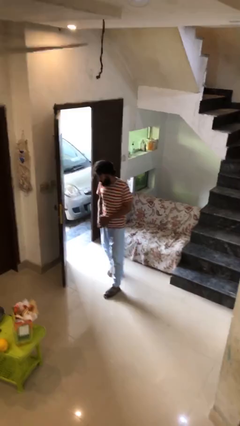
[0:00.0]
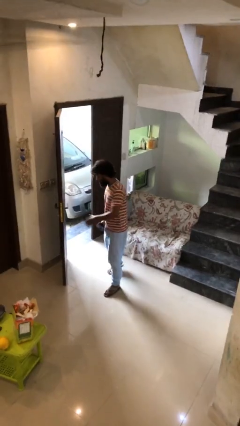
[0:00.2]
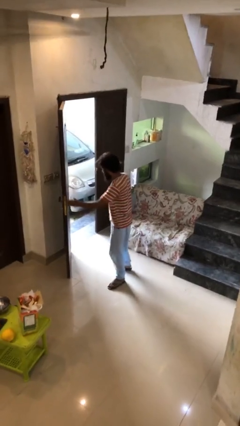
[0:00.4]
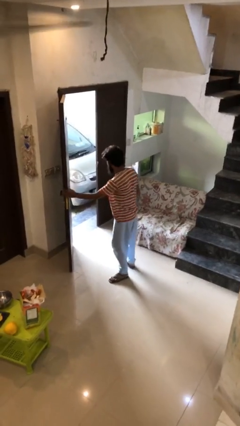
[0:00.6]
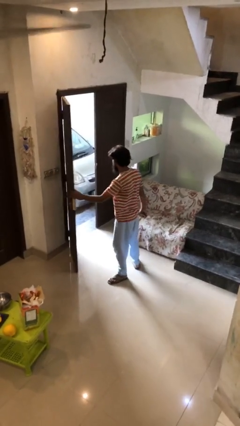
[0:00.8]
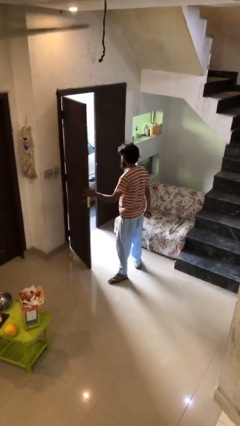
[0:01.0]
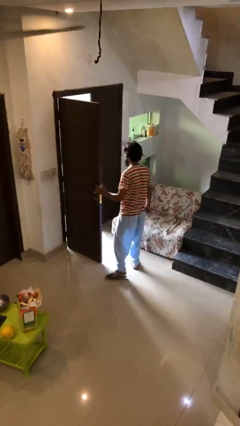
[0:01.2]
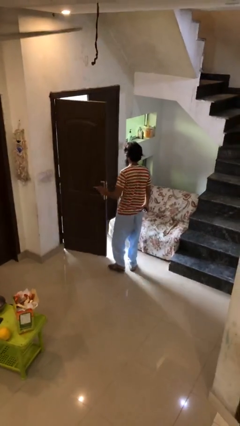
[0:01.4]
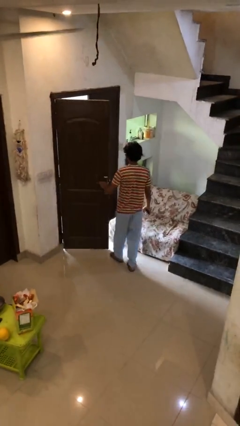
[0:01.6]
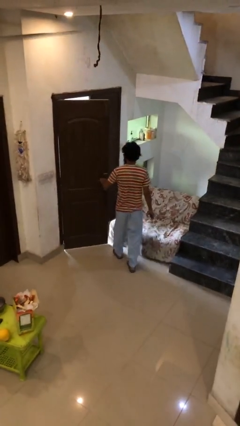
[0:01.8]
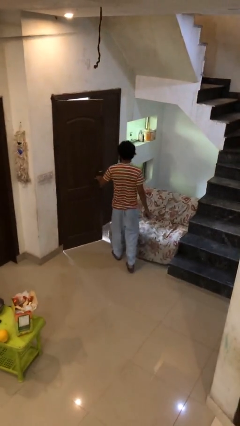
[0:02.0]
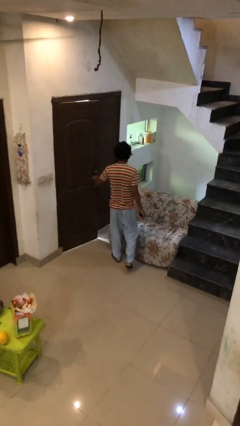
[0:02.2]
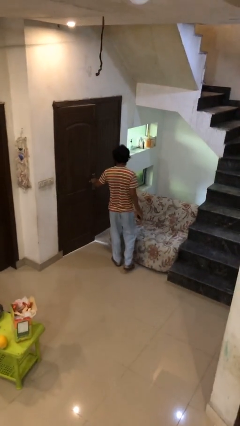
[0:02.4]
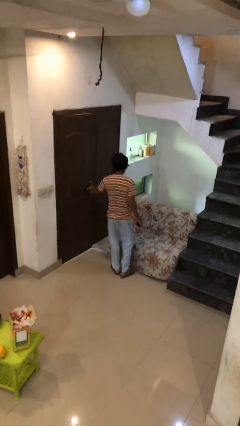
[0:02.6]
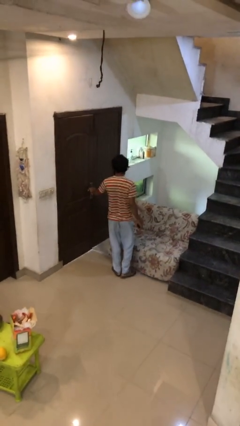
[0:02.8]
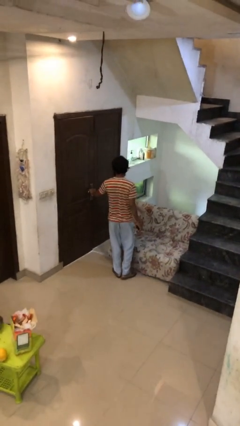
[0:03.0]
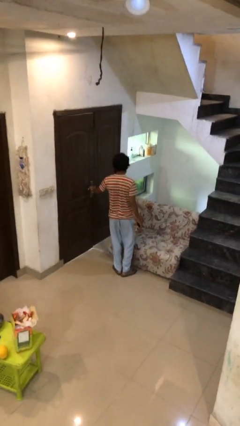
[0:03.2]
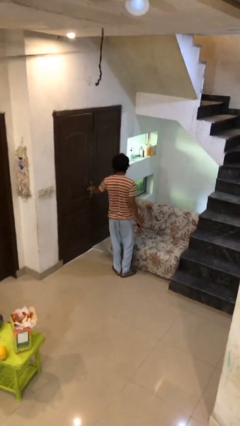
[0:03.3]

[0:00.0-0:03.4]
person closes facility door

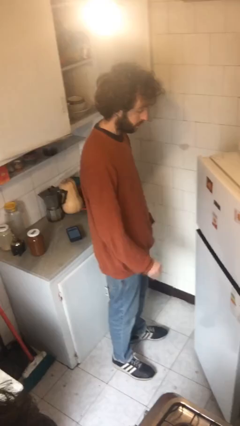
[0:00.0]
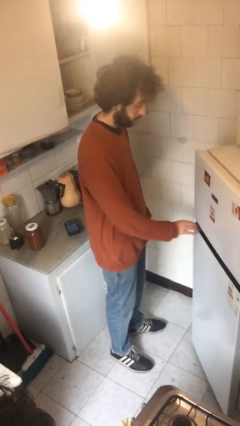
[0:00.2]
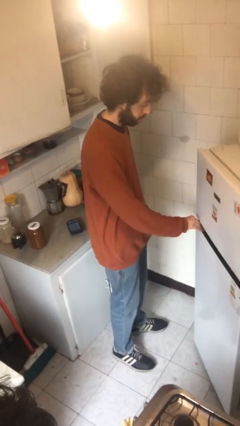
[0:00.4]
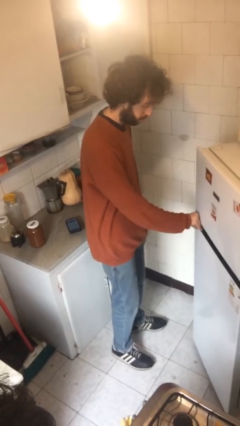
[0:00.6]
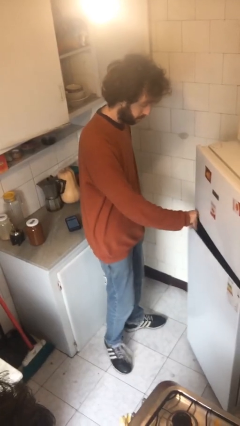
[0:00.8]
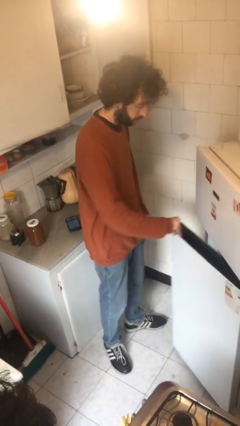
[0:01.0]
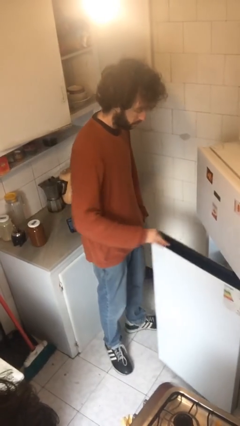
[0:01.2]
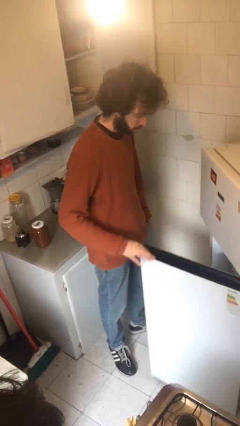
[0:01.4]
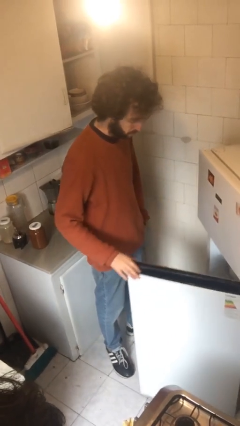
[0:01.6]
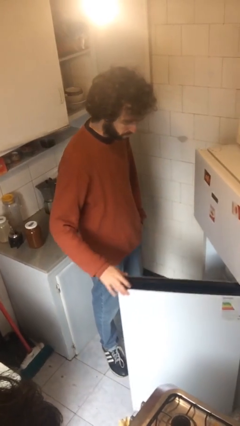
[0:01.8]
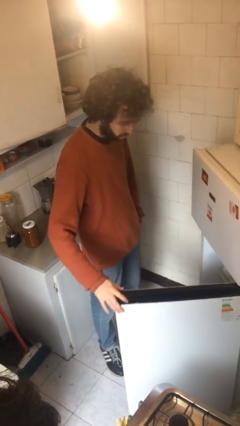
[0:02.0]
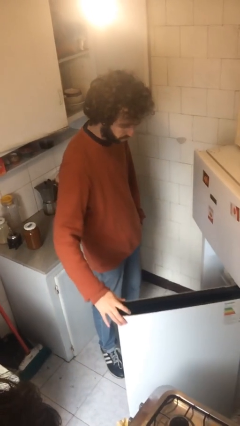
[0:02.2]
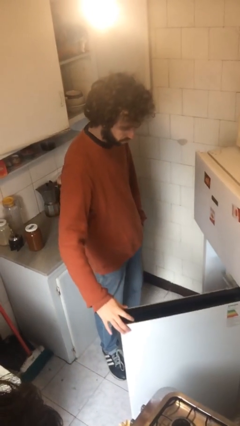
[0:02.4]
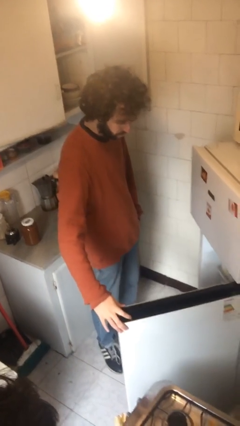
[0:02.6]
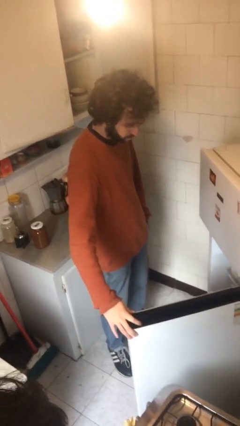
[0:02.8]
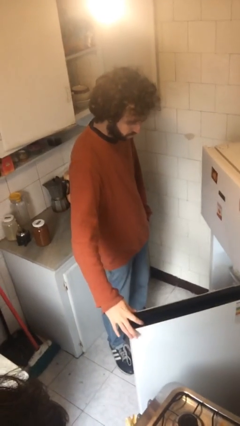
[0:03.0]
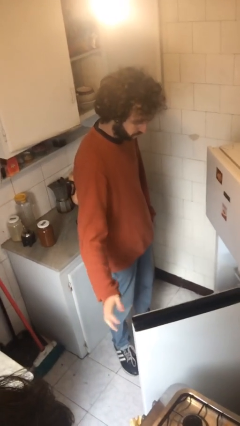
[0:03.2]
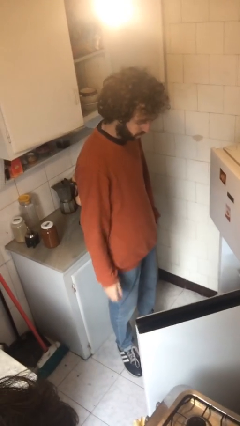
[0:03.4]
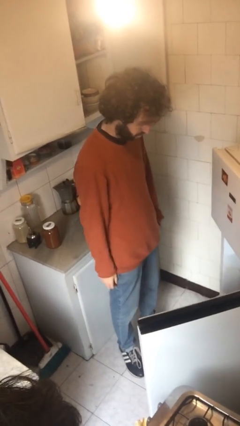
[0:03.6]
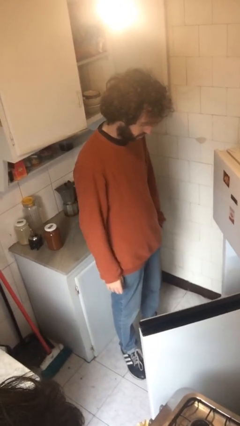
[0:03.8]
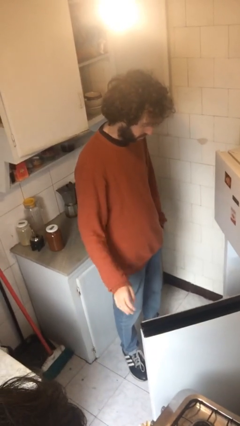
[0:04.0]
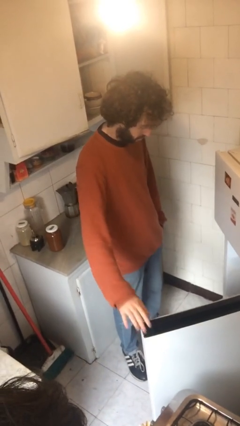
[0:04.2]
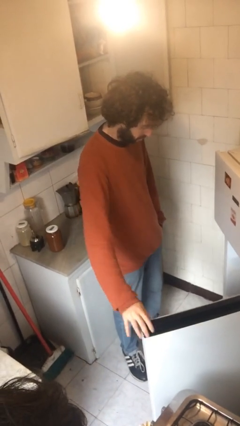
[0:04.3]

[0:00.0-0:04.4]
person opens refrigerator

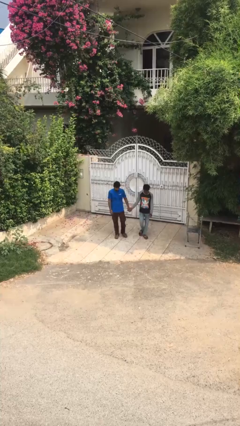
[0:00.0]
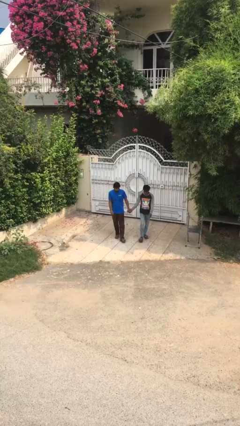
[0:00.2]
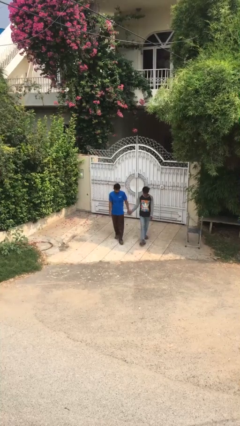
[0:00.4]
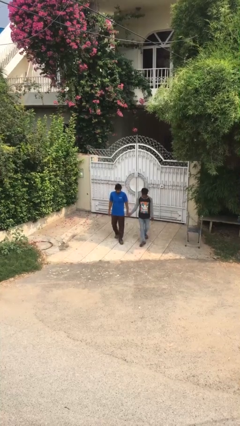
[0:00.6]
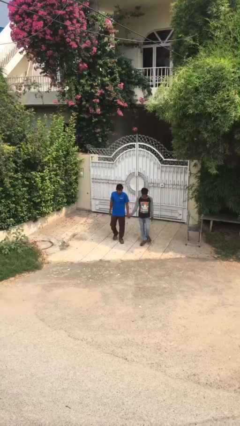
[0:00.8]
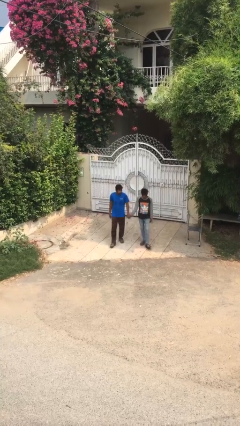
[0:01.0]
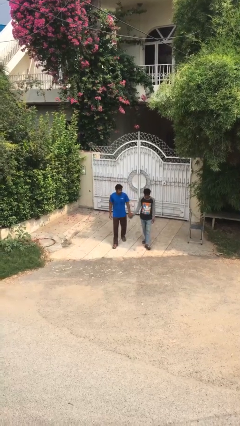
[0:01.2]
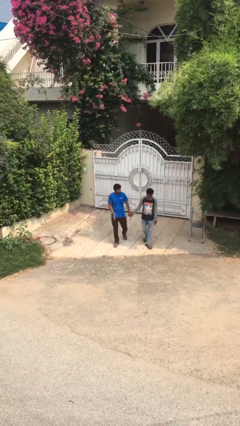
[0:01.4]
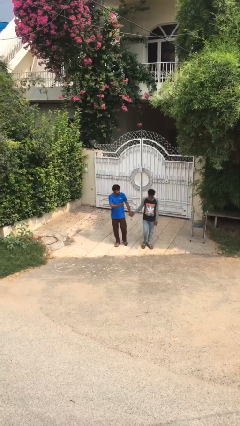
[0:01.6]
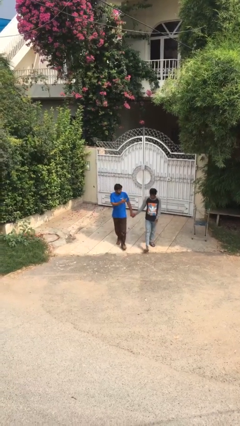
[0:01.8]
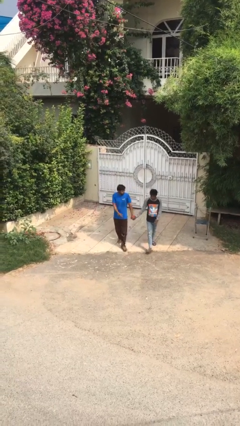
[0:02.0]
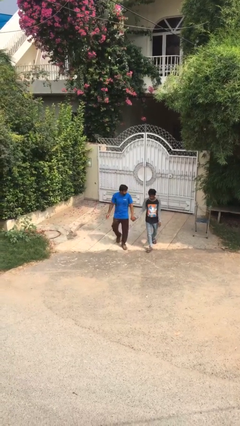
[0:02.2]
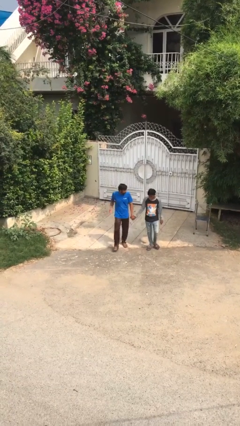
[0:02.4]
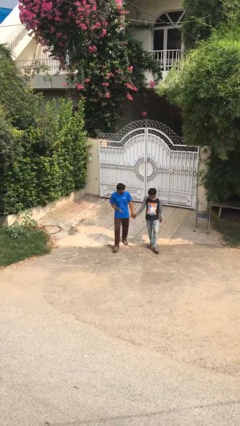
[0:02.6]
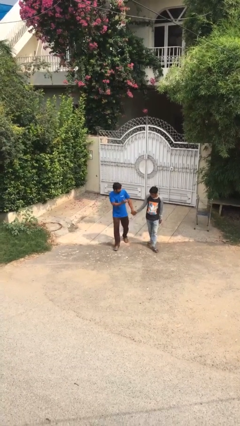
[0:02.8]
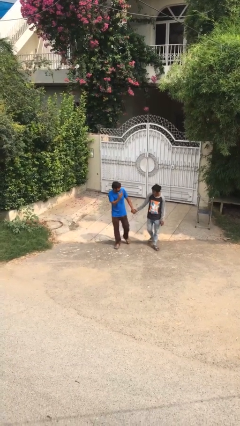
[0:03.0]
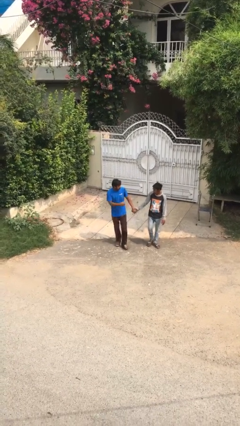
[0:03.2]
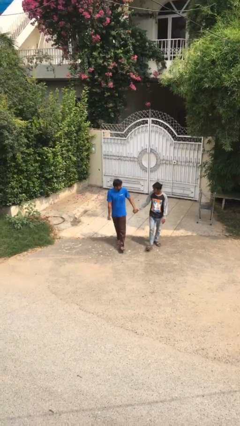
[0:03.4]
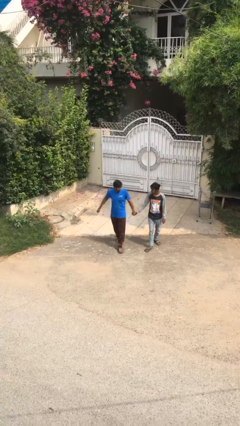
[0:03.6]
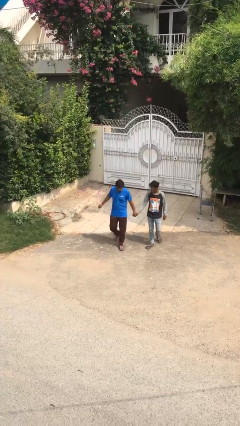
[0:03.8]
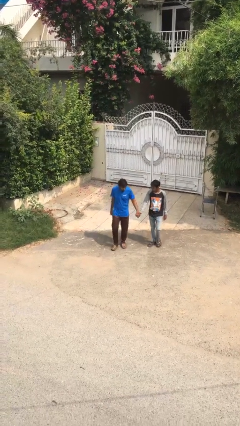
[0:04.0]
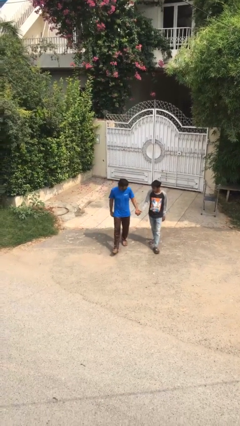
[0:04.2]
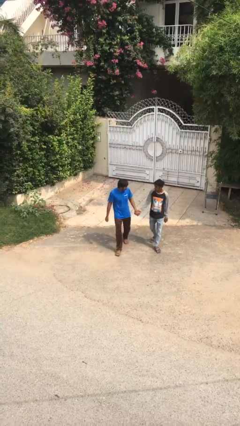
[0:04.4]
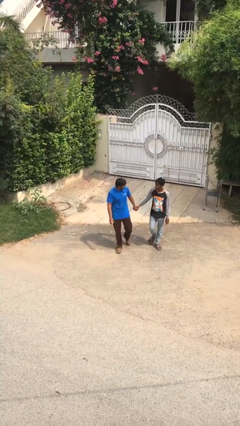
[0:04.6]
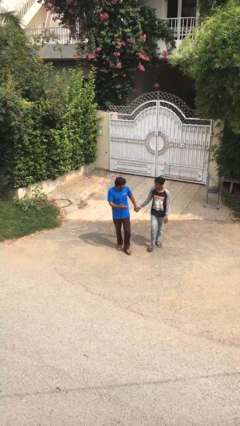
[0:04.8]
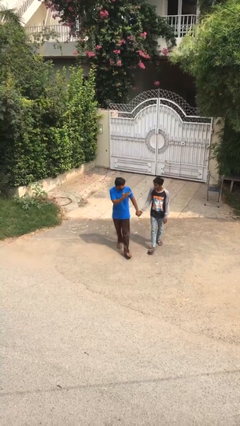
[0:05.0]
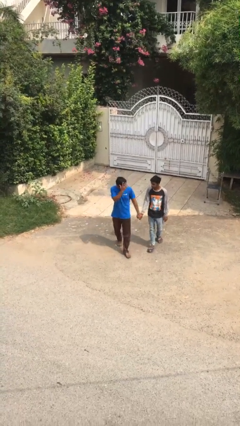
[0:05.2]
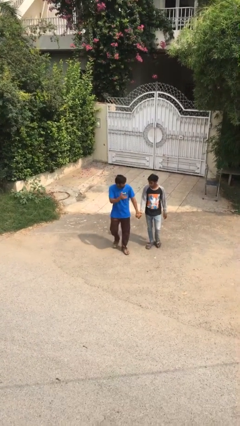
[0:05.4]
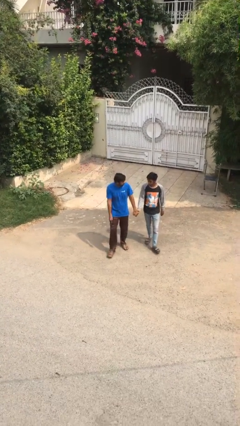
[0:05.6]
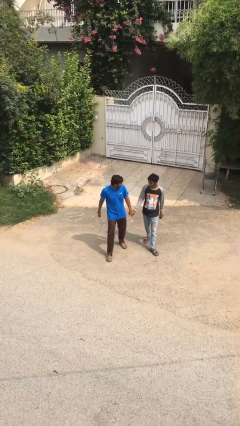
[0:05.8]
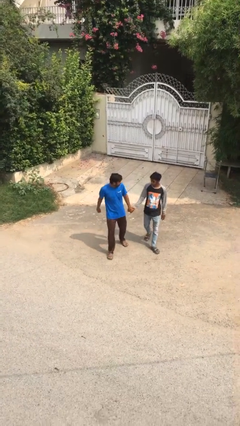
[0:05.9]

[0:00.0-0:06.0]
person holds hand

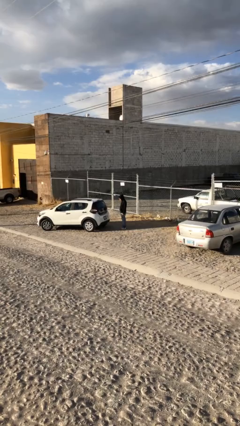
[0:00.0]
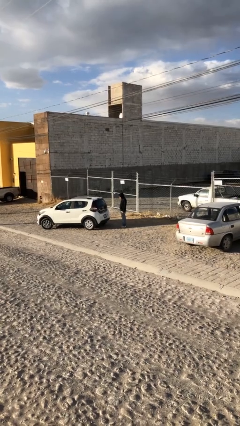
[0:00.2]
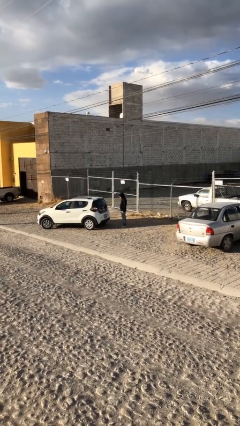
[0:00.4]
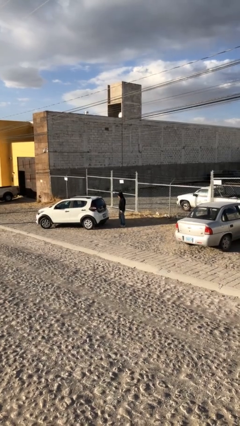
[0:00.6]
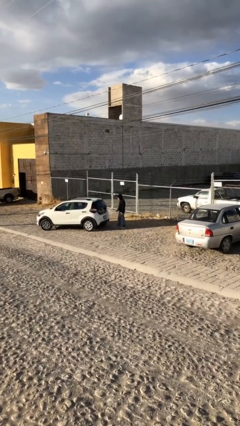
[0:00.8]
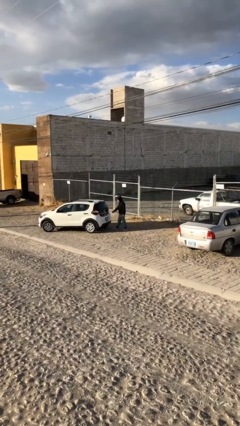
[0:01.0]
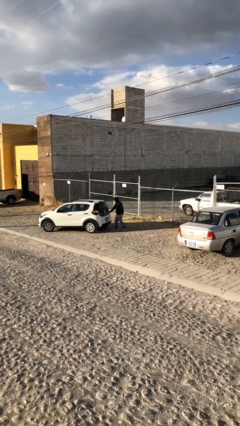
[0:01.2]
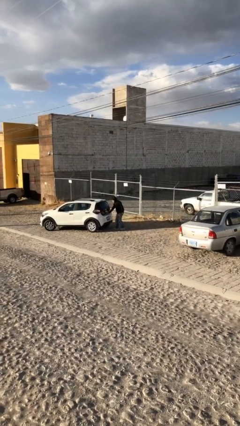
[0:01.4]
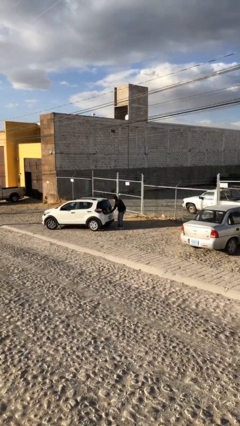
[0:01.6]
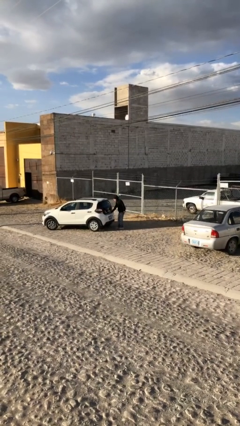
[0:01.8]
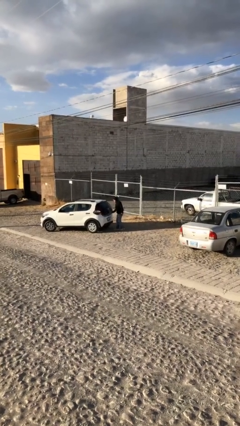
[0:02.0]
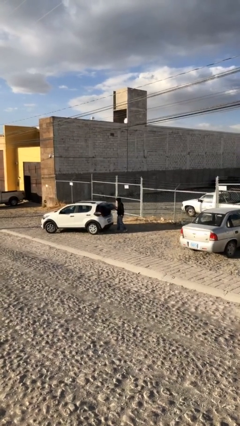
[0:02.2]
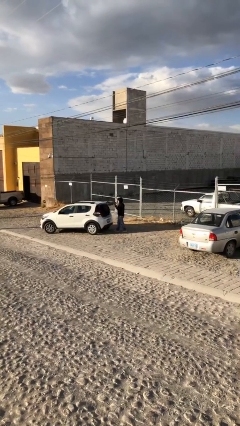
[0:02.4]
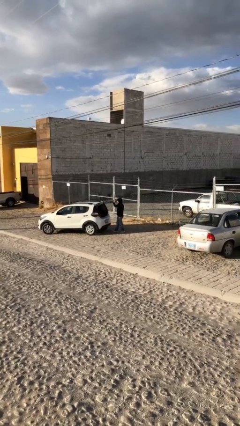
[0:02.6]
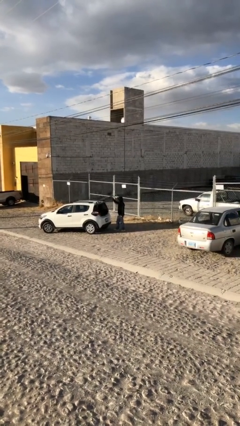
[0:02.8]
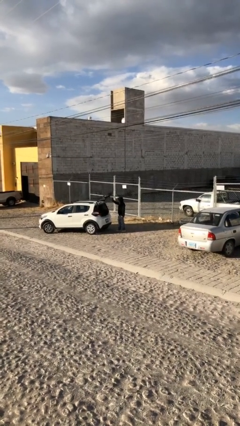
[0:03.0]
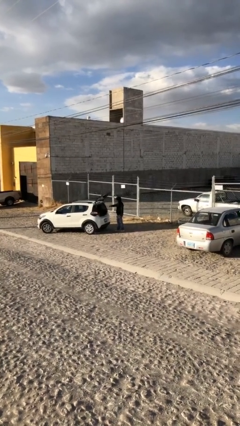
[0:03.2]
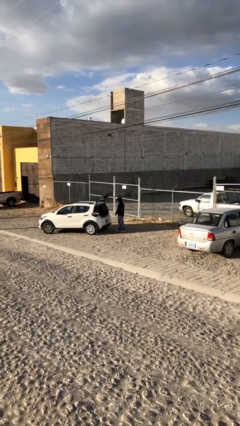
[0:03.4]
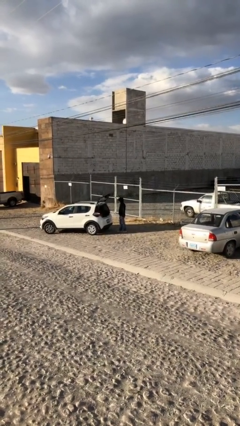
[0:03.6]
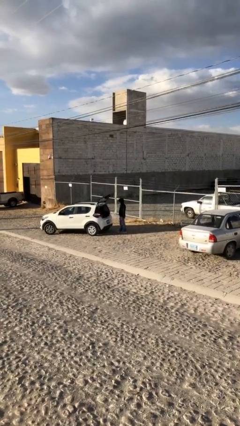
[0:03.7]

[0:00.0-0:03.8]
person opens car trunk

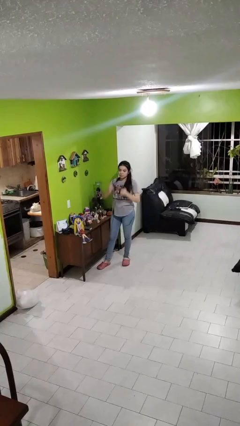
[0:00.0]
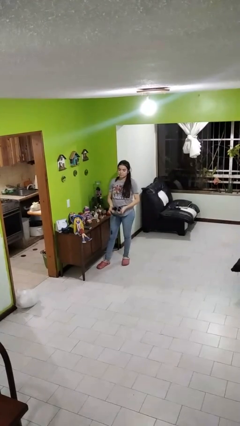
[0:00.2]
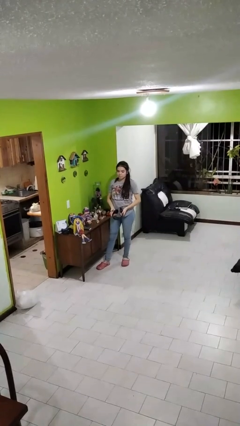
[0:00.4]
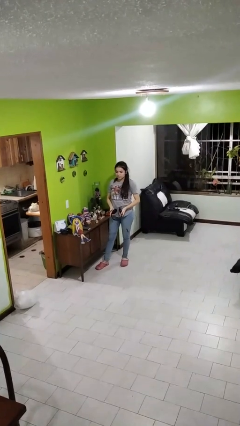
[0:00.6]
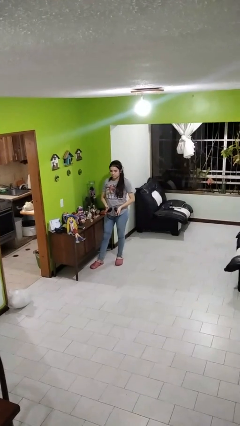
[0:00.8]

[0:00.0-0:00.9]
person takes off headphones
